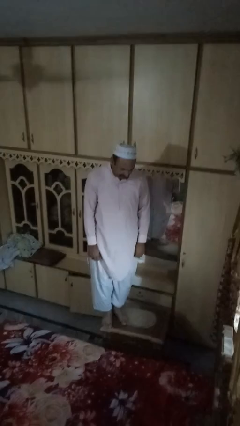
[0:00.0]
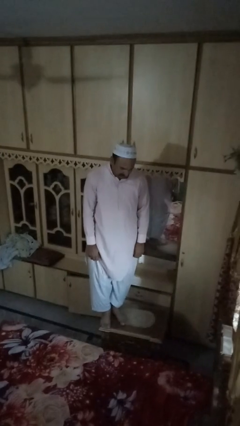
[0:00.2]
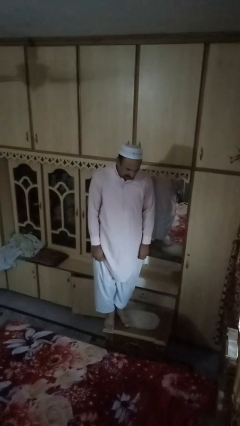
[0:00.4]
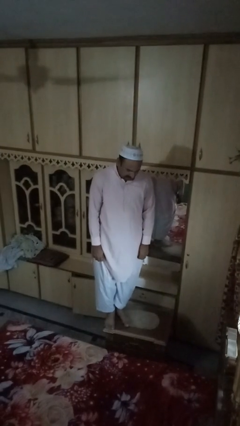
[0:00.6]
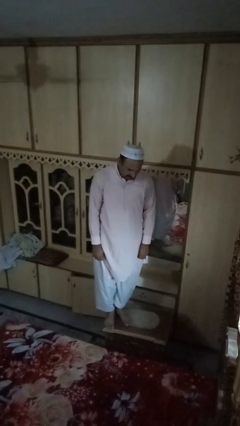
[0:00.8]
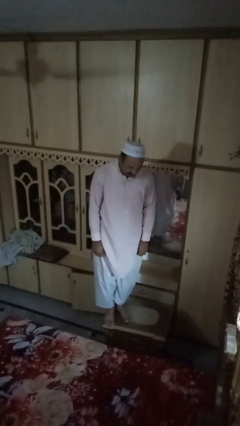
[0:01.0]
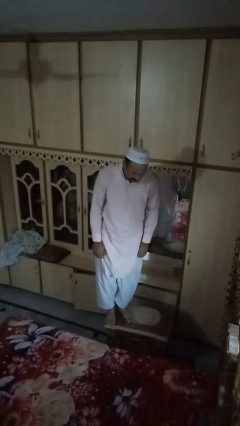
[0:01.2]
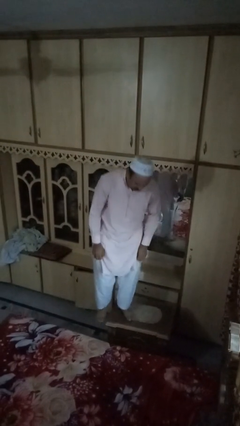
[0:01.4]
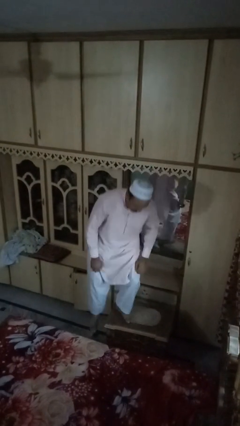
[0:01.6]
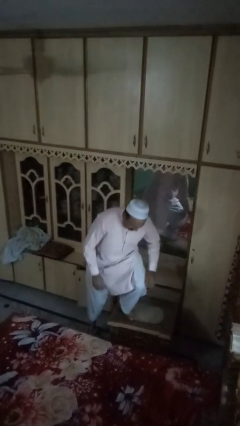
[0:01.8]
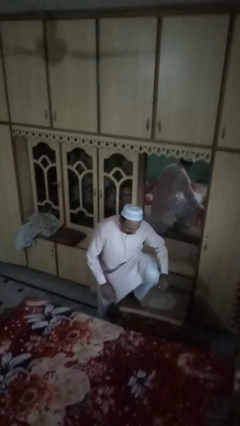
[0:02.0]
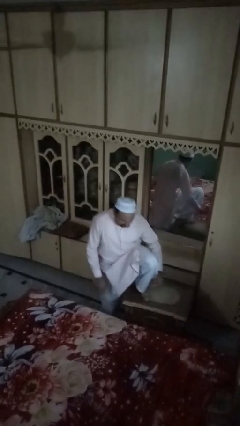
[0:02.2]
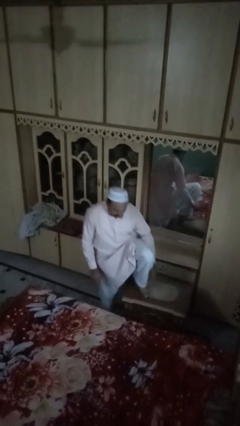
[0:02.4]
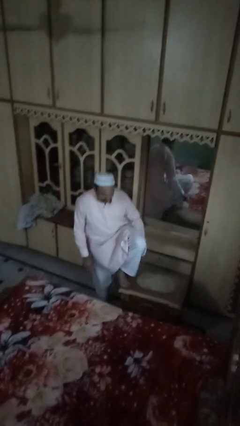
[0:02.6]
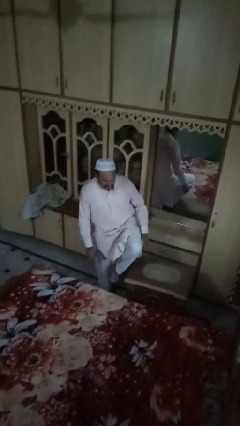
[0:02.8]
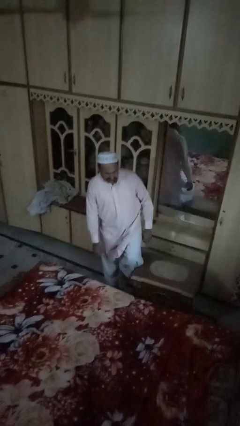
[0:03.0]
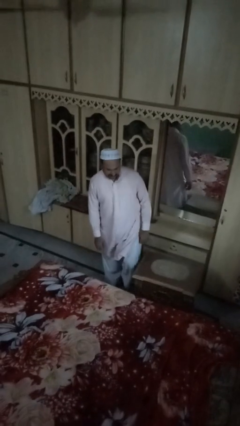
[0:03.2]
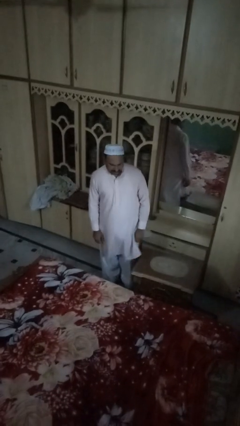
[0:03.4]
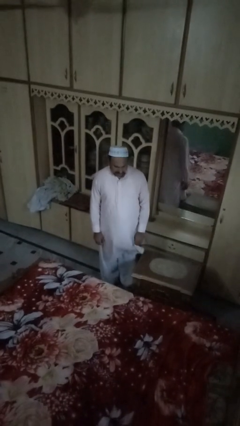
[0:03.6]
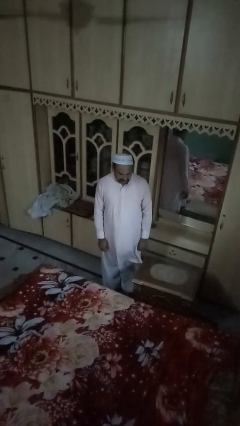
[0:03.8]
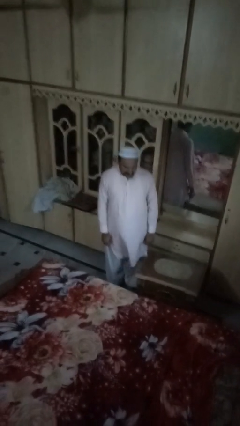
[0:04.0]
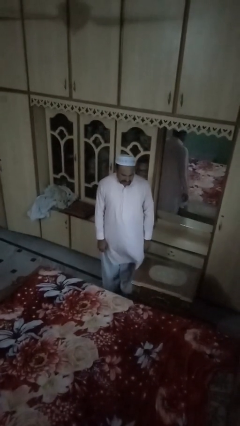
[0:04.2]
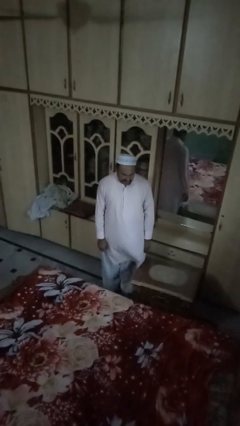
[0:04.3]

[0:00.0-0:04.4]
person climbs off table

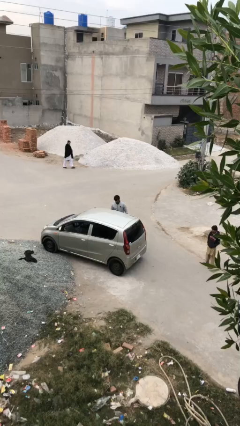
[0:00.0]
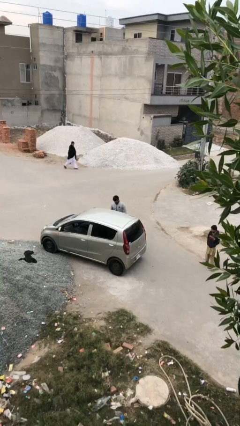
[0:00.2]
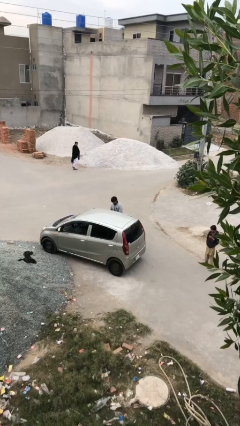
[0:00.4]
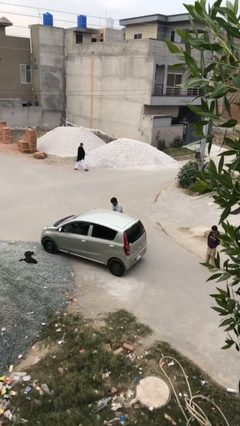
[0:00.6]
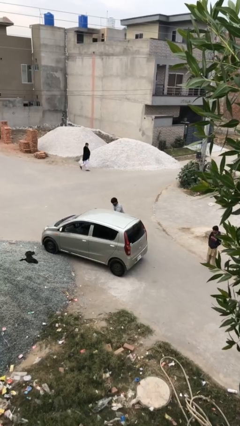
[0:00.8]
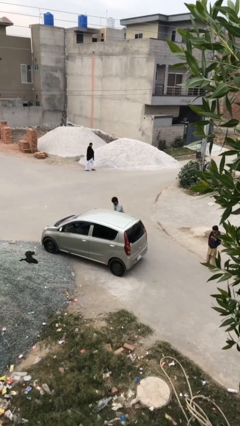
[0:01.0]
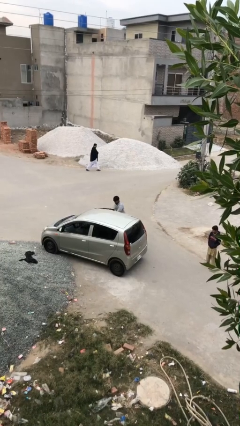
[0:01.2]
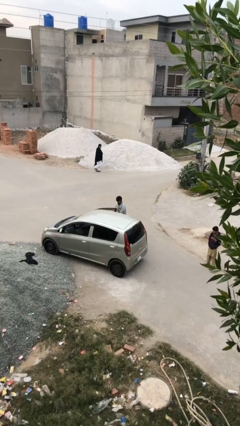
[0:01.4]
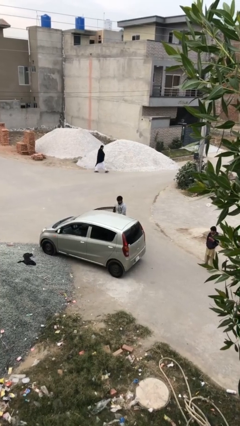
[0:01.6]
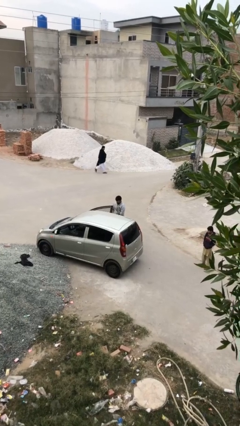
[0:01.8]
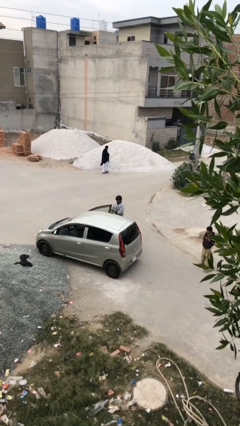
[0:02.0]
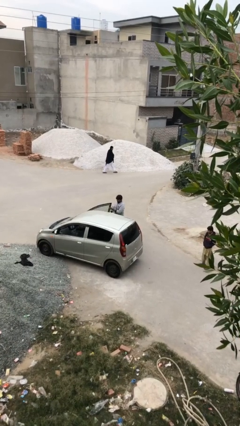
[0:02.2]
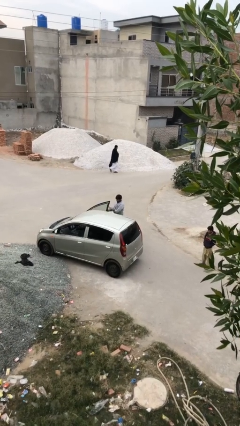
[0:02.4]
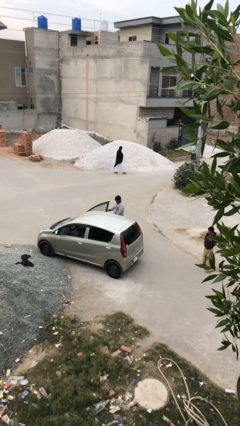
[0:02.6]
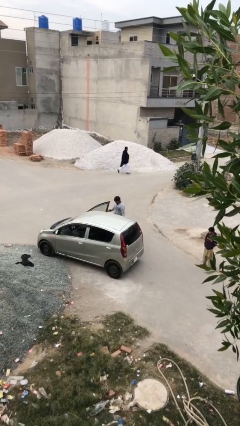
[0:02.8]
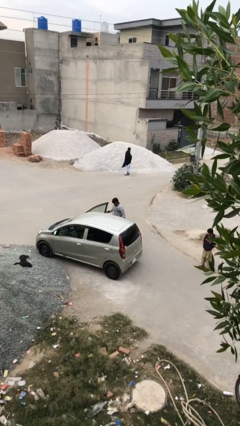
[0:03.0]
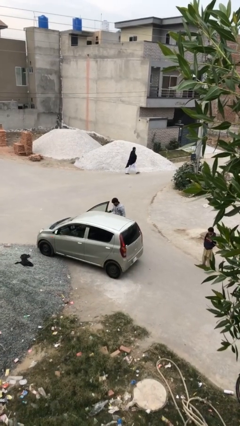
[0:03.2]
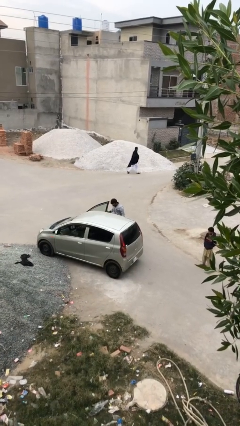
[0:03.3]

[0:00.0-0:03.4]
person opens car door

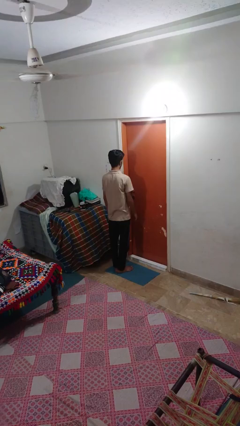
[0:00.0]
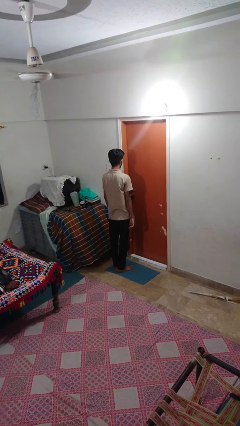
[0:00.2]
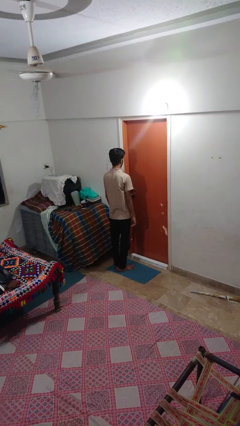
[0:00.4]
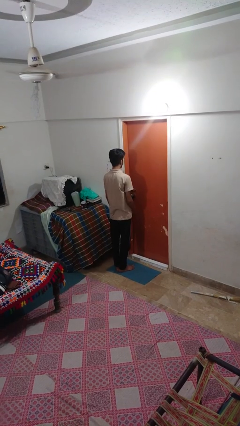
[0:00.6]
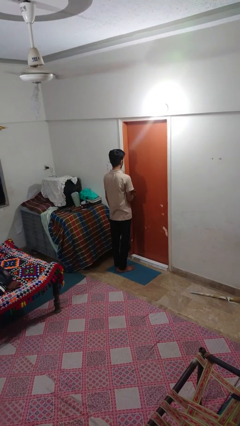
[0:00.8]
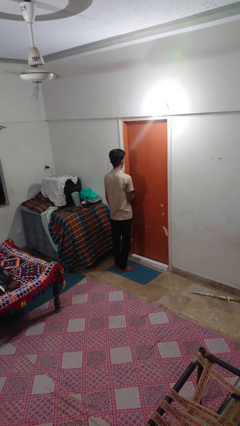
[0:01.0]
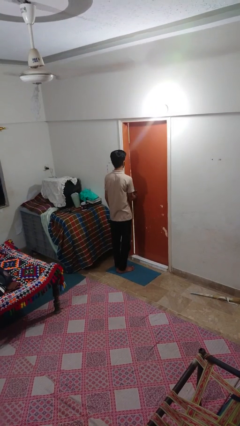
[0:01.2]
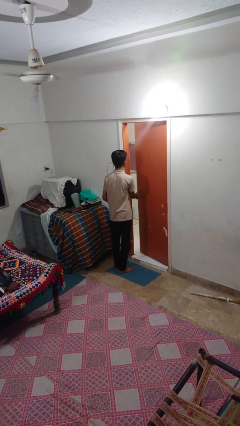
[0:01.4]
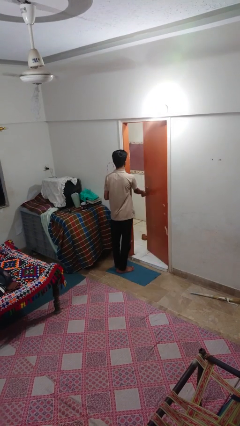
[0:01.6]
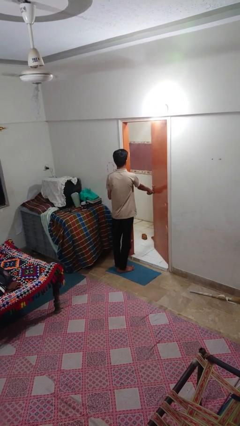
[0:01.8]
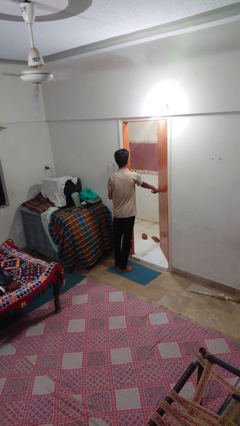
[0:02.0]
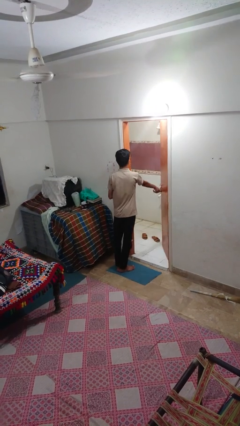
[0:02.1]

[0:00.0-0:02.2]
person opens facility door

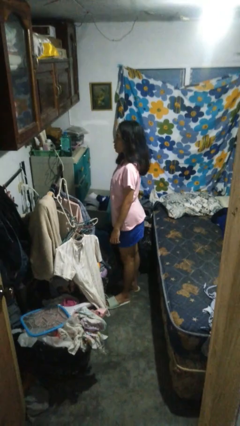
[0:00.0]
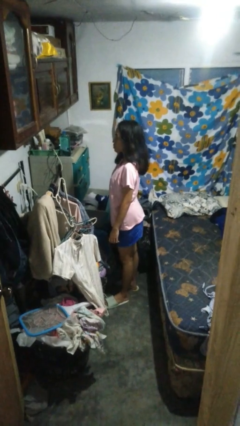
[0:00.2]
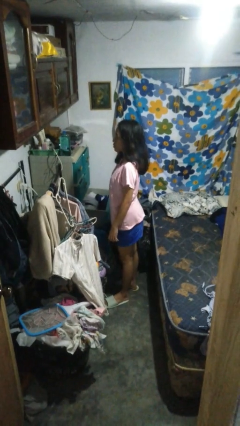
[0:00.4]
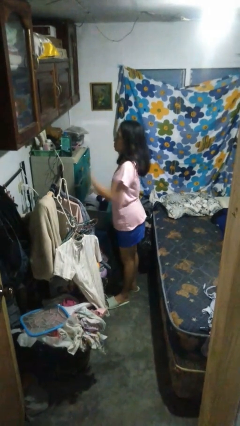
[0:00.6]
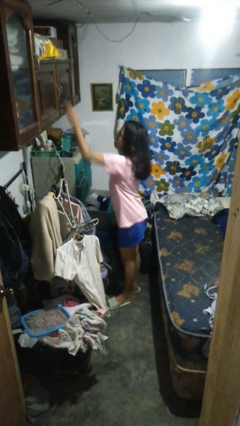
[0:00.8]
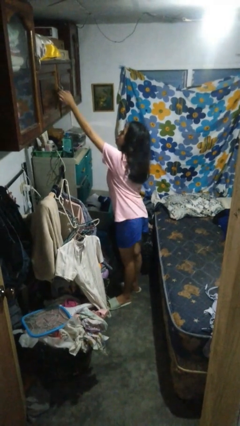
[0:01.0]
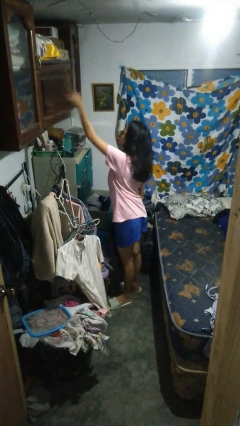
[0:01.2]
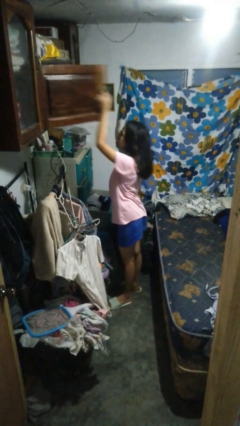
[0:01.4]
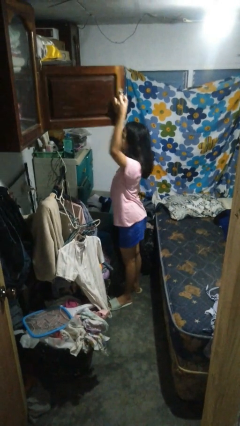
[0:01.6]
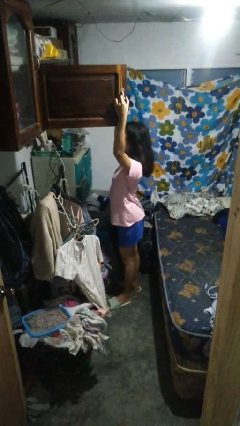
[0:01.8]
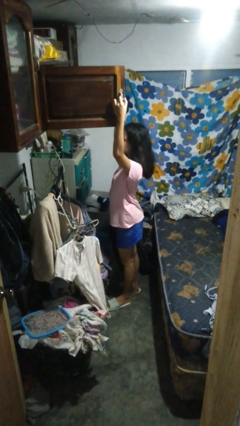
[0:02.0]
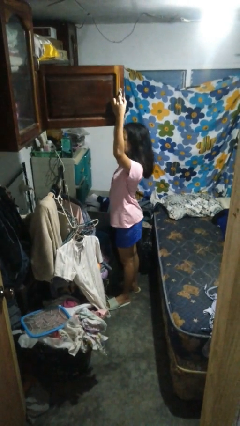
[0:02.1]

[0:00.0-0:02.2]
person opens closet door

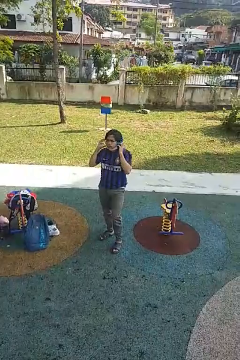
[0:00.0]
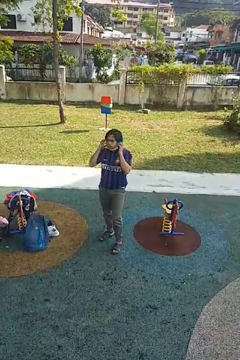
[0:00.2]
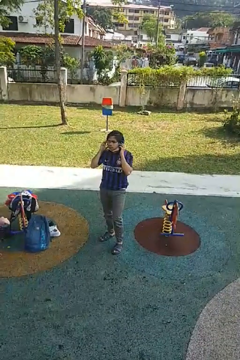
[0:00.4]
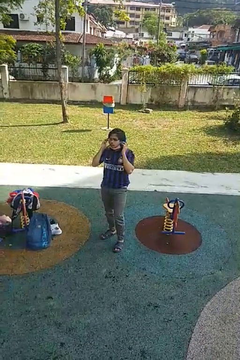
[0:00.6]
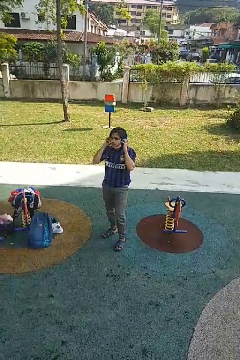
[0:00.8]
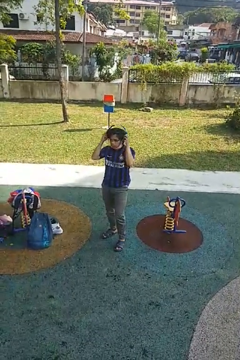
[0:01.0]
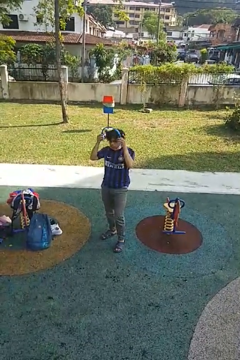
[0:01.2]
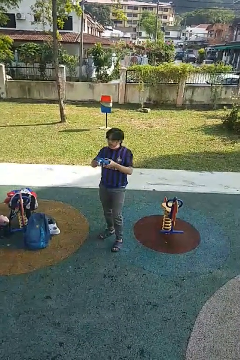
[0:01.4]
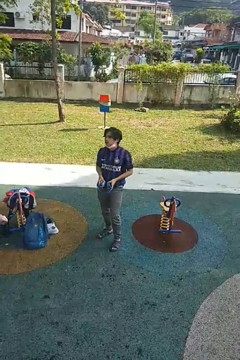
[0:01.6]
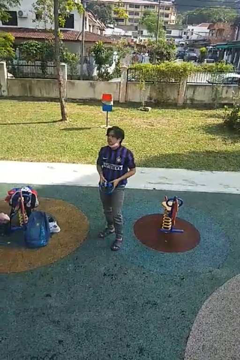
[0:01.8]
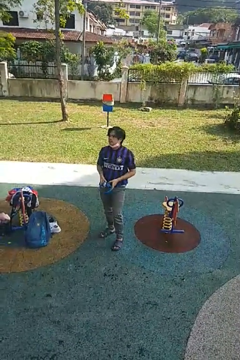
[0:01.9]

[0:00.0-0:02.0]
person takes off headphones

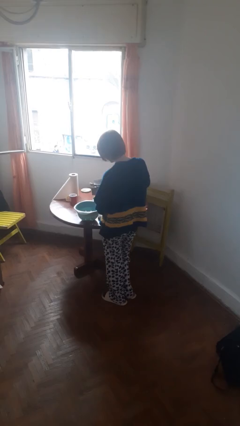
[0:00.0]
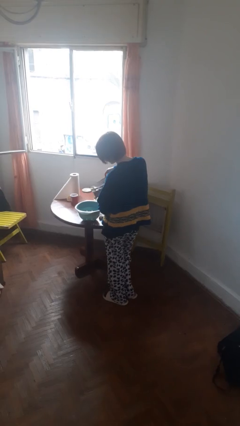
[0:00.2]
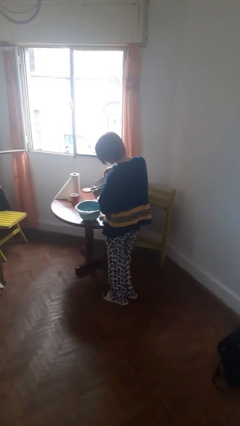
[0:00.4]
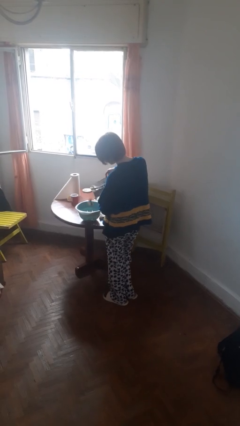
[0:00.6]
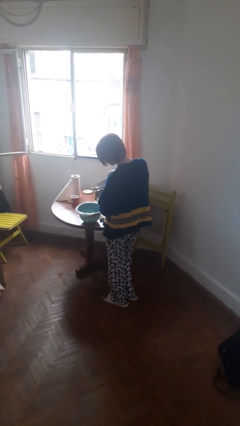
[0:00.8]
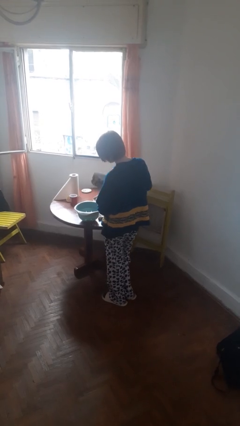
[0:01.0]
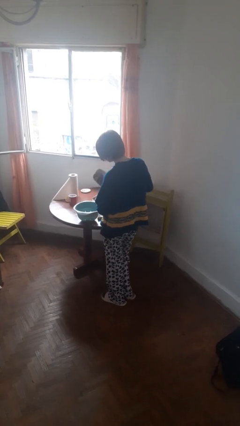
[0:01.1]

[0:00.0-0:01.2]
person pours into bowl

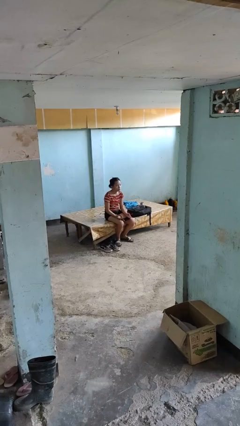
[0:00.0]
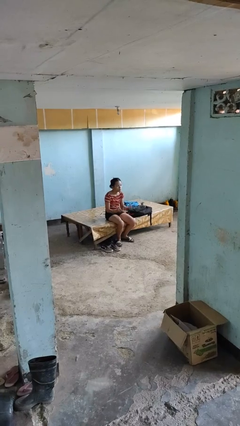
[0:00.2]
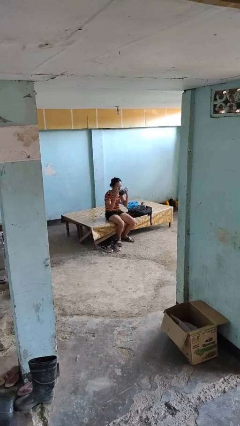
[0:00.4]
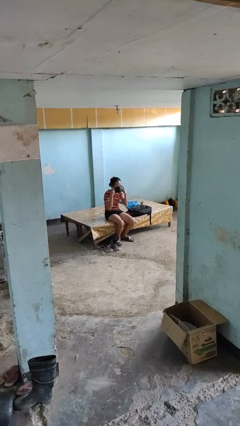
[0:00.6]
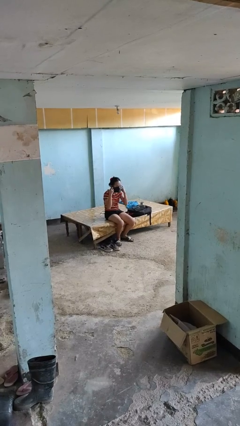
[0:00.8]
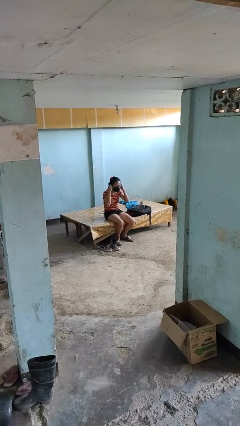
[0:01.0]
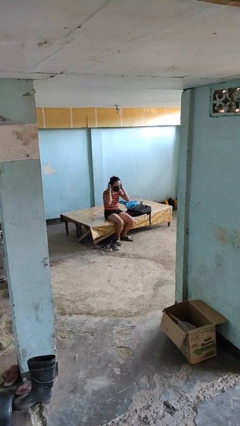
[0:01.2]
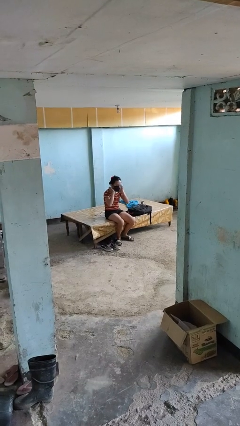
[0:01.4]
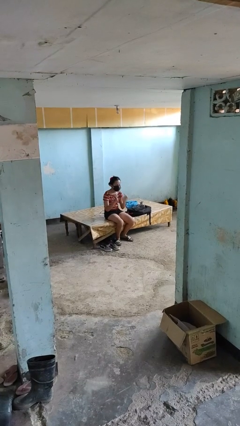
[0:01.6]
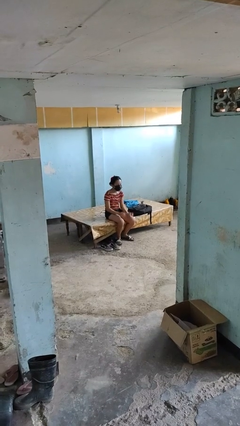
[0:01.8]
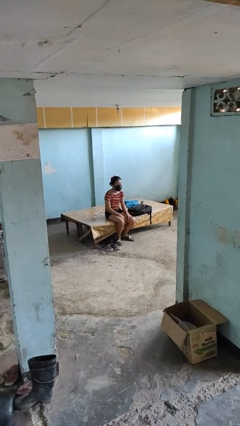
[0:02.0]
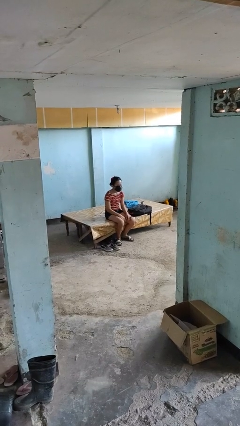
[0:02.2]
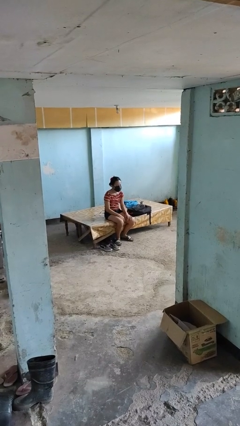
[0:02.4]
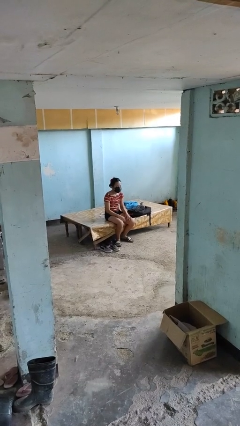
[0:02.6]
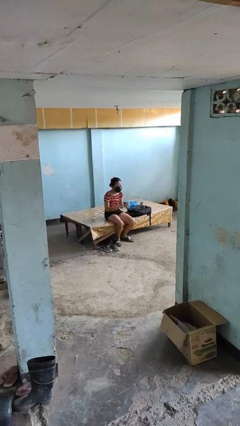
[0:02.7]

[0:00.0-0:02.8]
person puts on facemask
